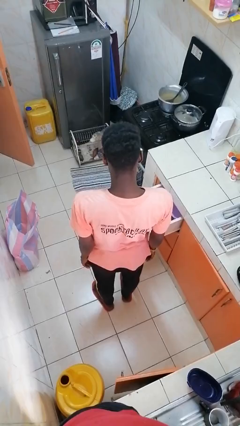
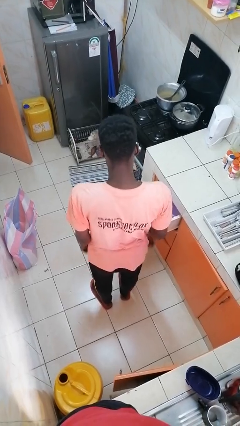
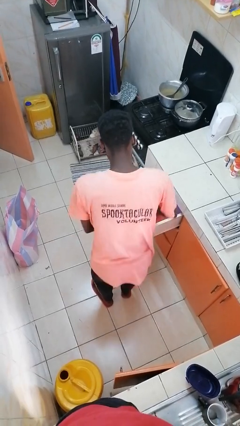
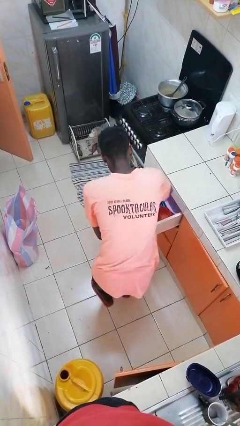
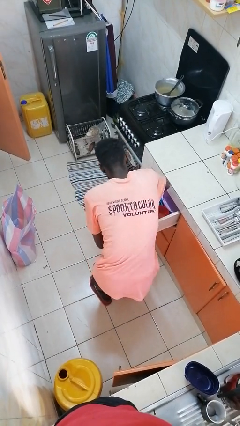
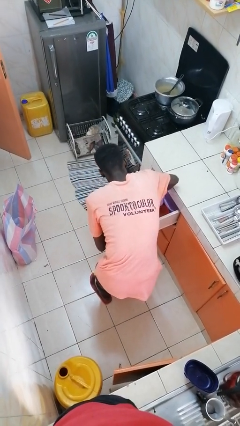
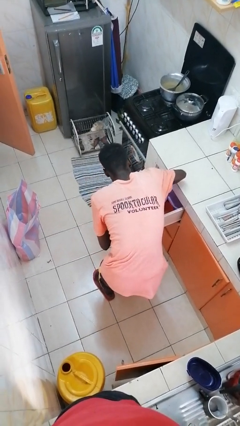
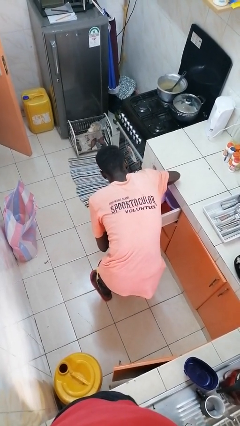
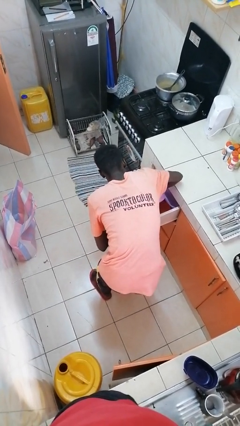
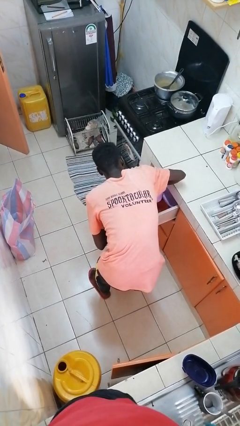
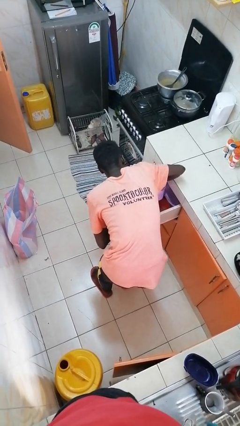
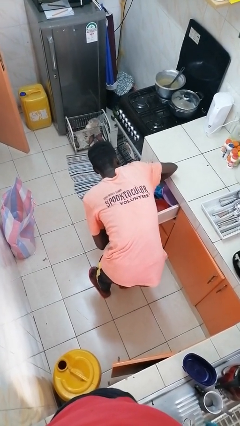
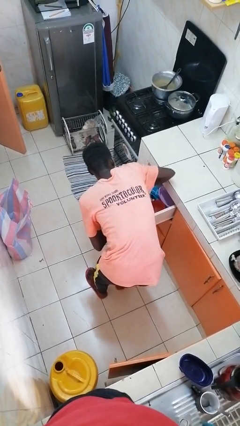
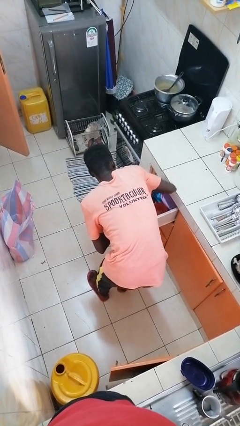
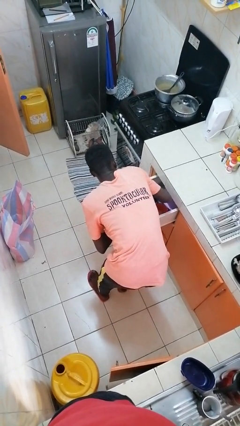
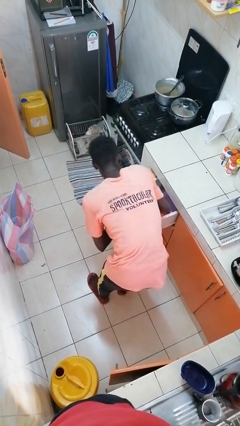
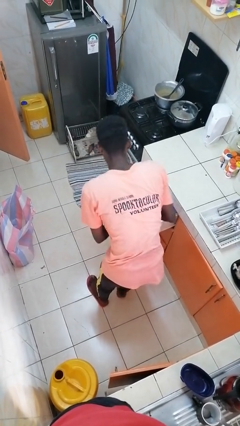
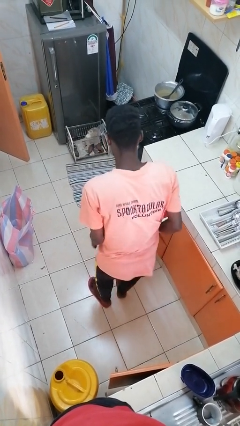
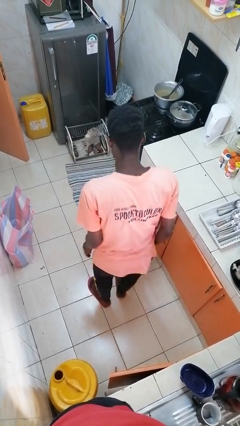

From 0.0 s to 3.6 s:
person searches in kitchen drawer

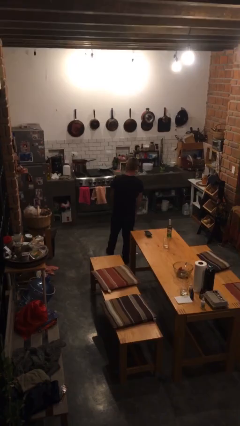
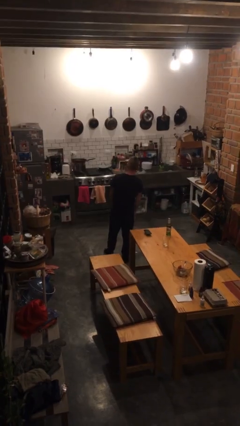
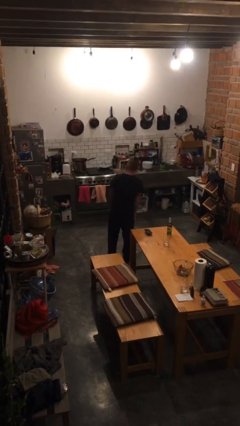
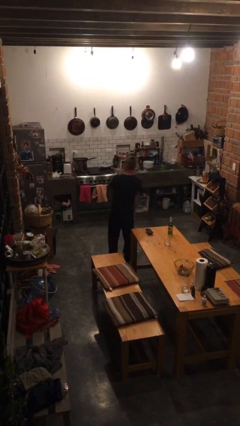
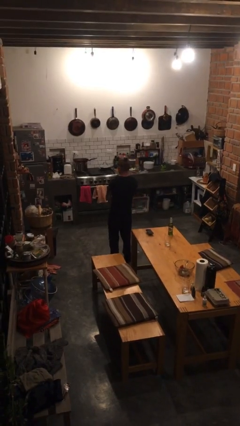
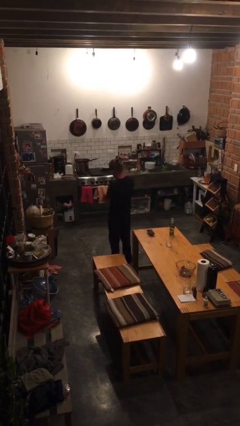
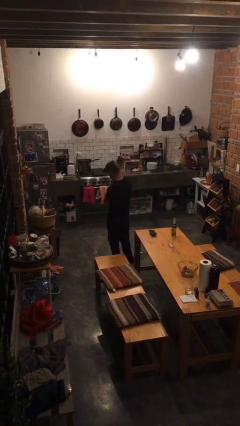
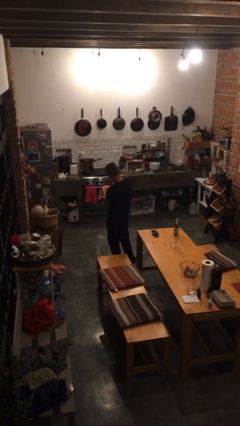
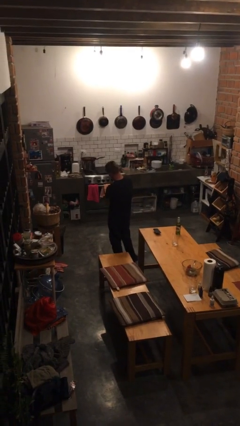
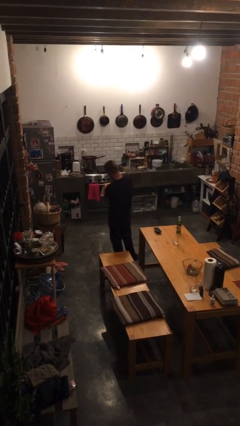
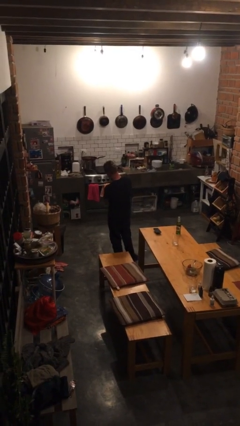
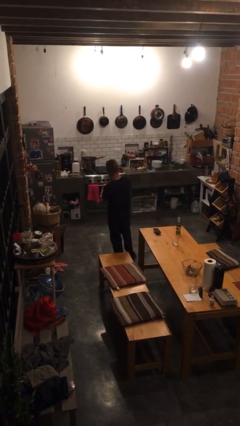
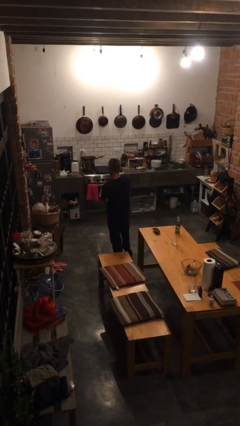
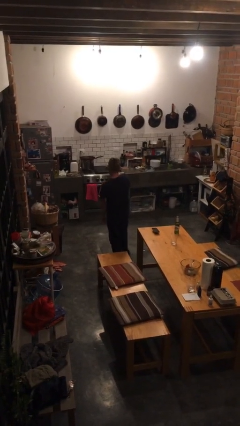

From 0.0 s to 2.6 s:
person gestures arms x

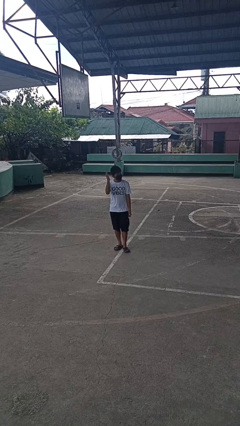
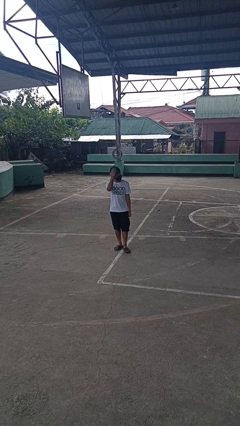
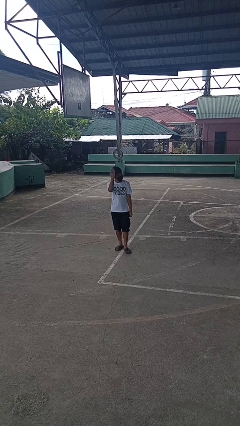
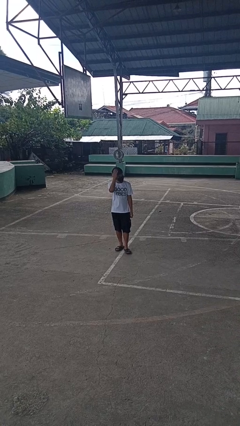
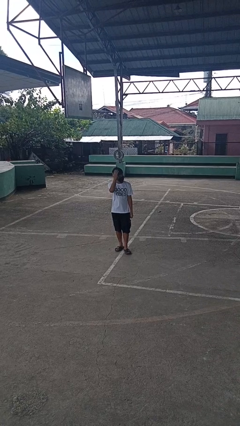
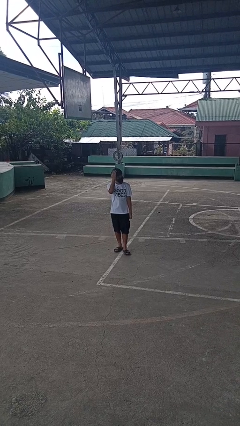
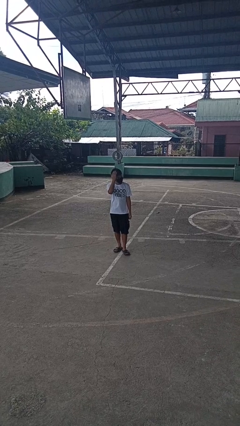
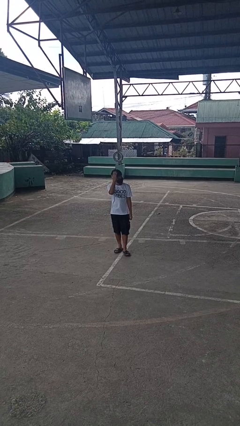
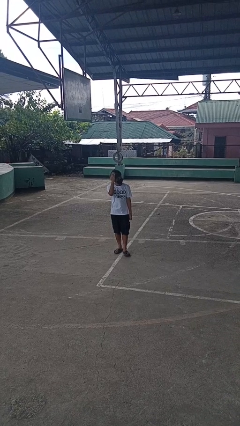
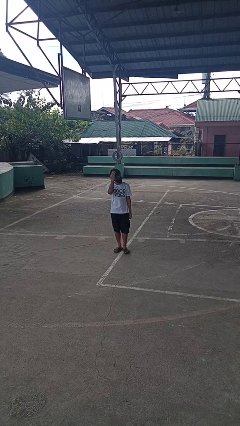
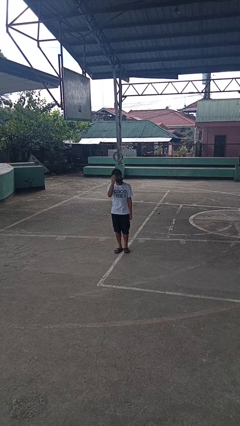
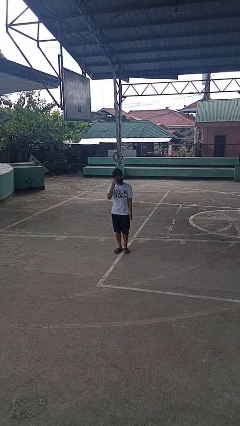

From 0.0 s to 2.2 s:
person pats head

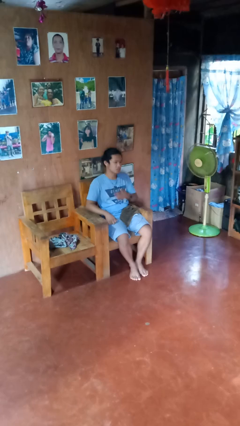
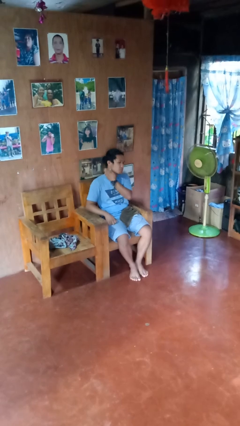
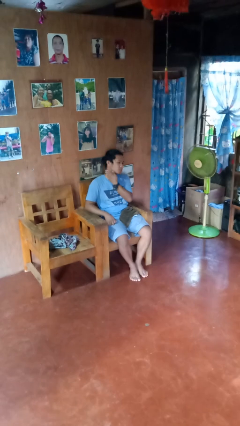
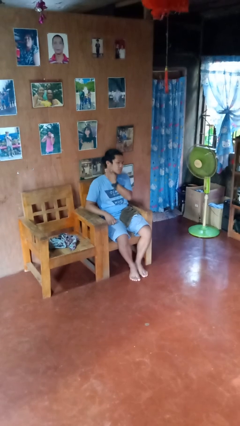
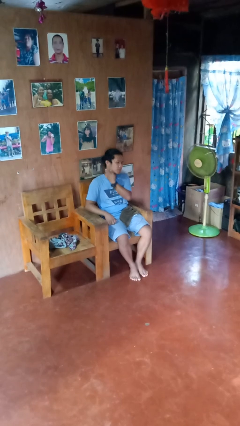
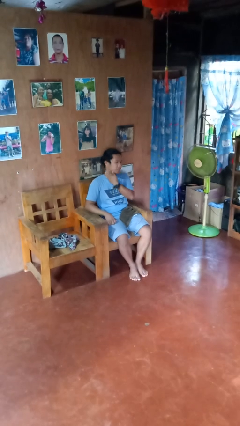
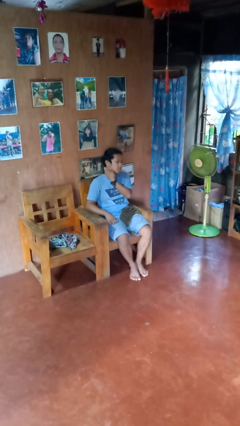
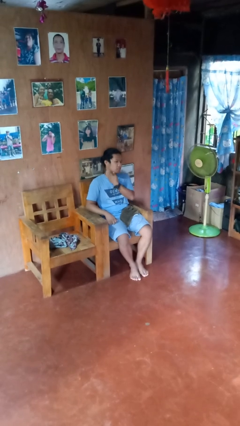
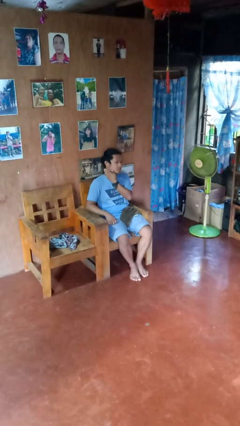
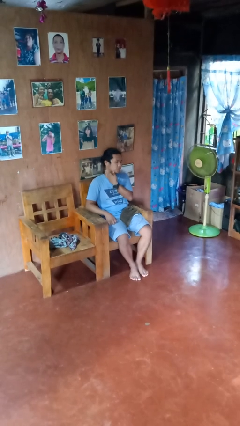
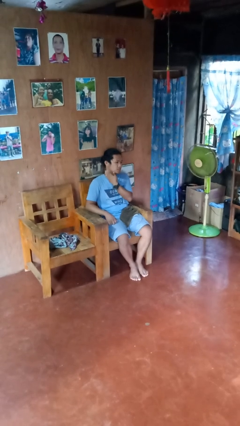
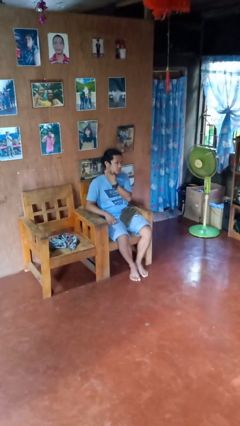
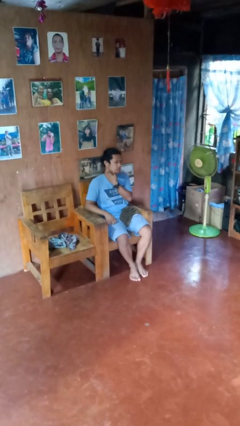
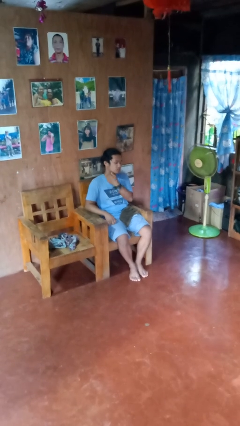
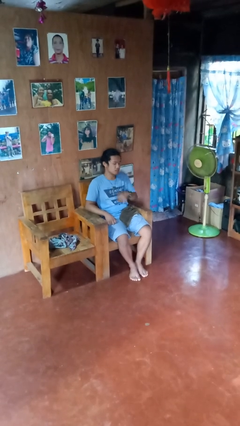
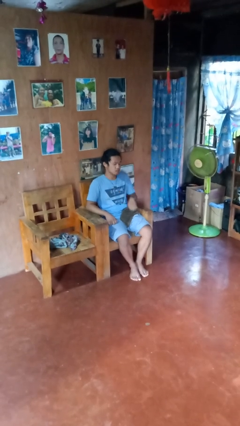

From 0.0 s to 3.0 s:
person swats bug

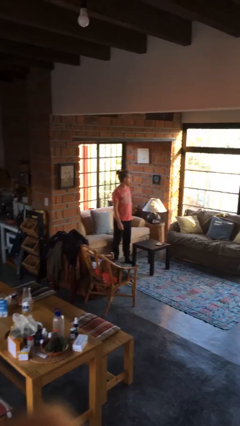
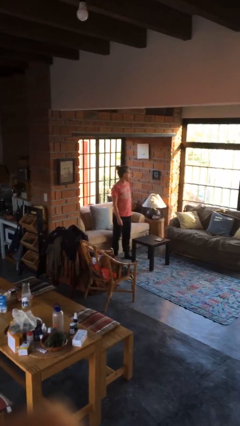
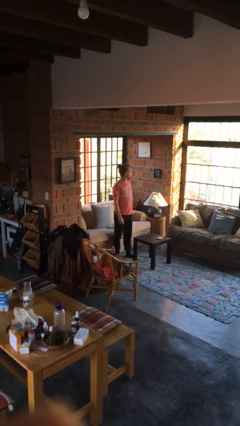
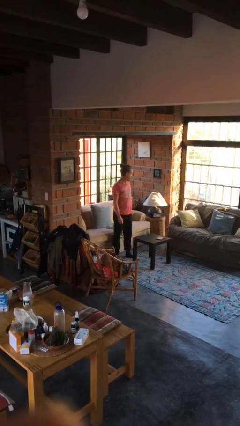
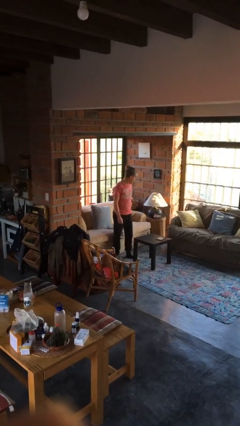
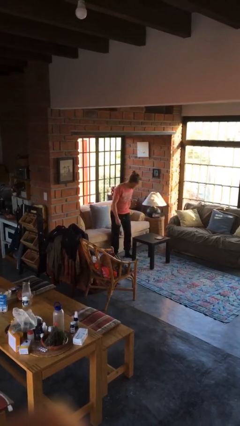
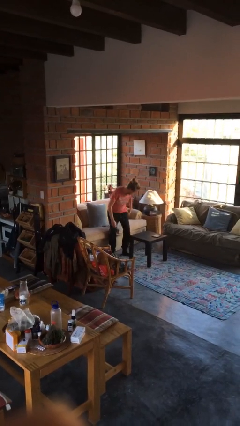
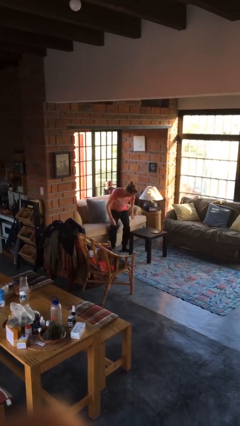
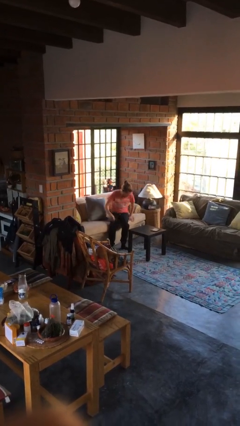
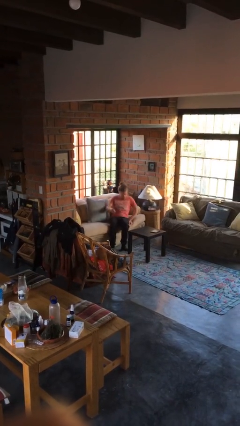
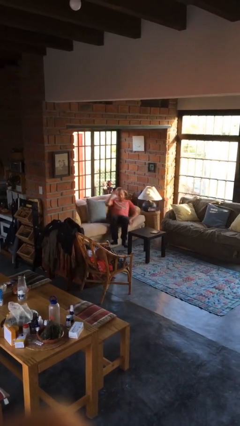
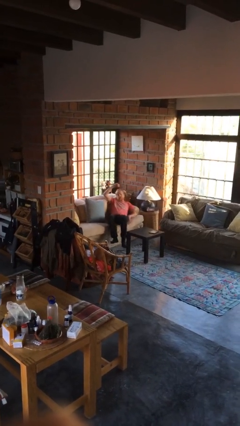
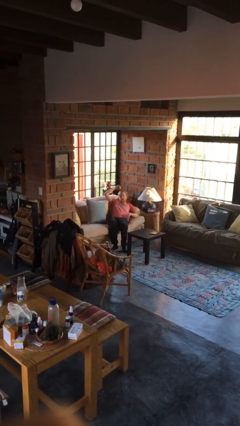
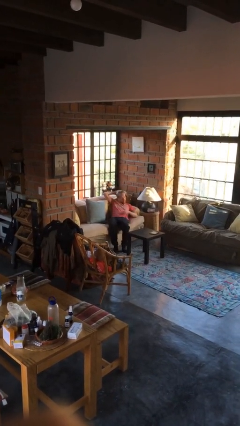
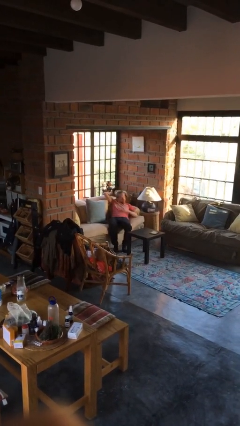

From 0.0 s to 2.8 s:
person lies down on couch

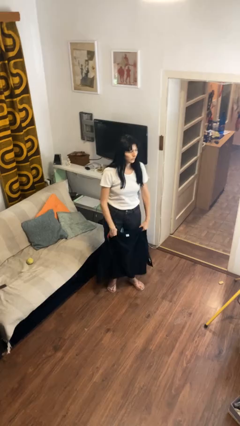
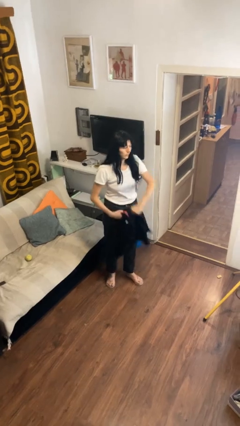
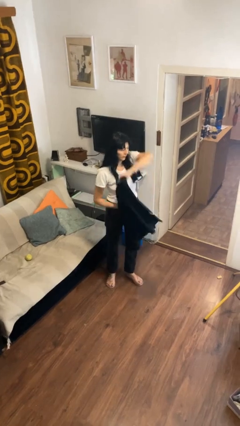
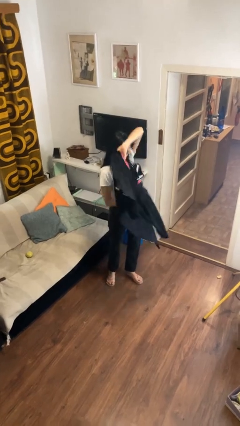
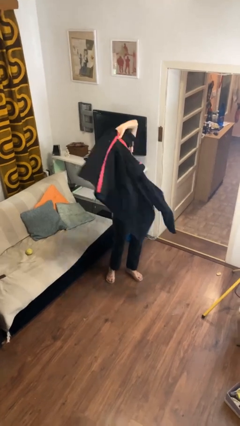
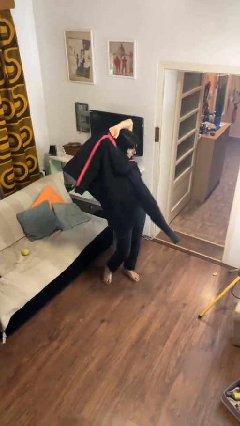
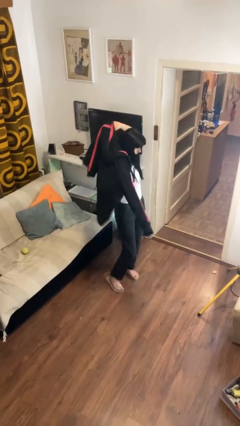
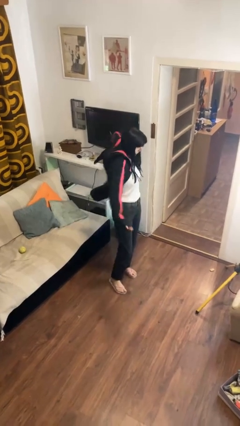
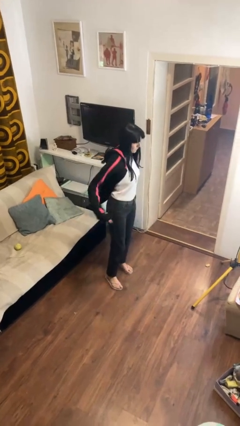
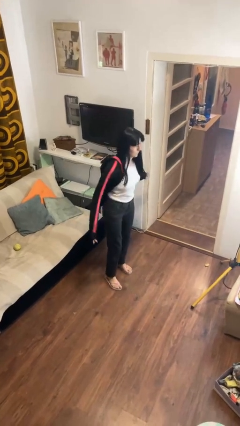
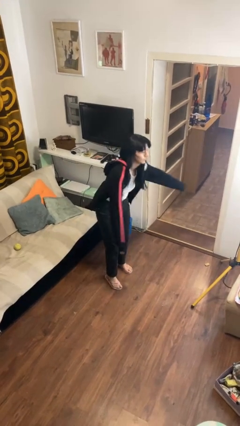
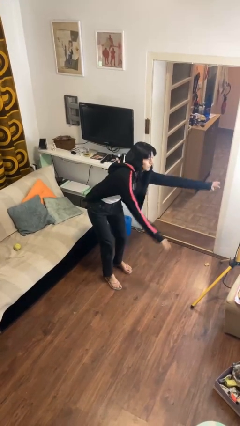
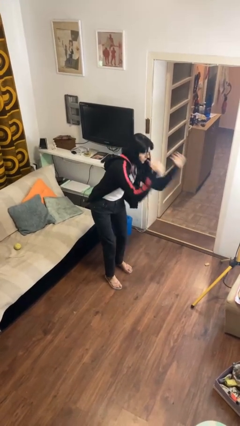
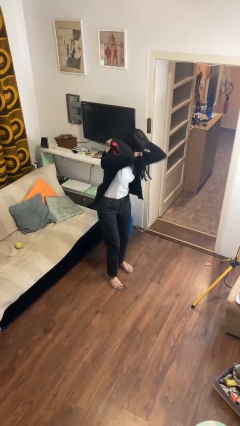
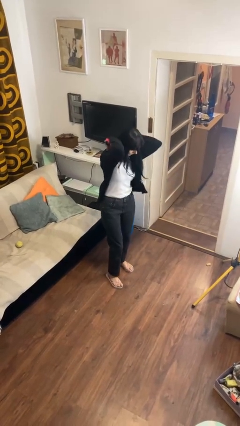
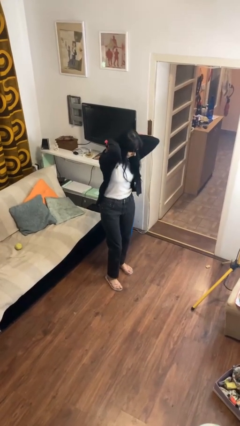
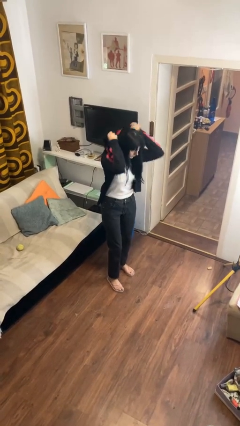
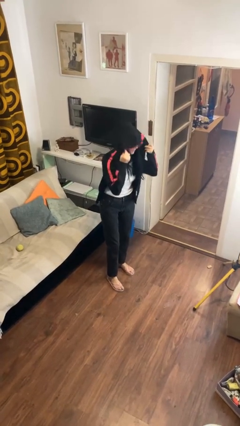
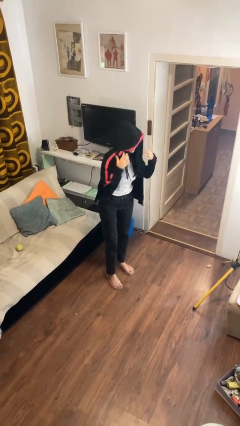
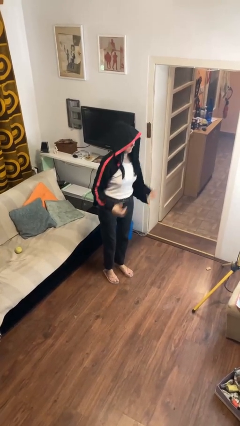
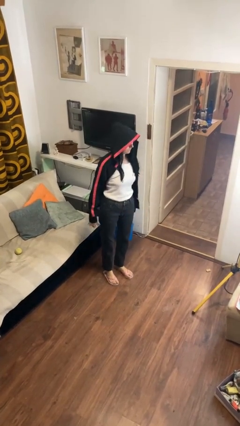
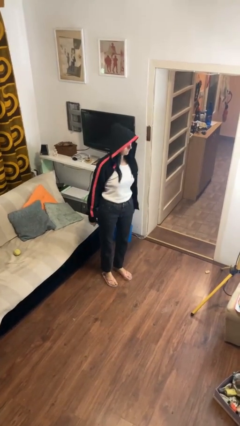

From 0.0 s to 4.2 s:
person puts on hoodie
